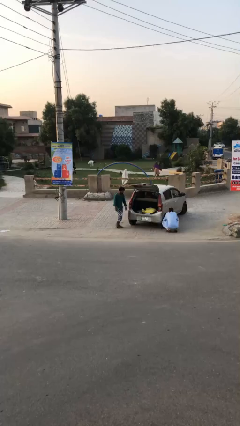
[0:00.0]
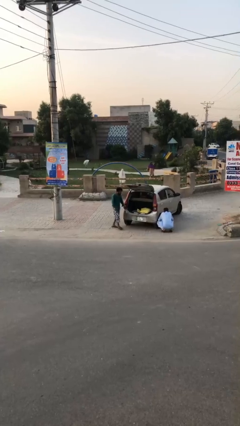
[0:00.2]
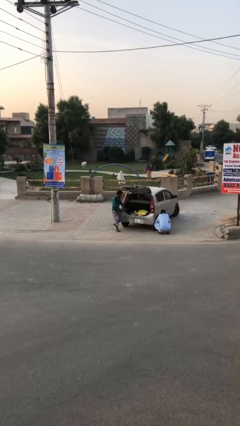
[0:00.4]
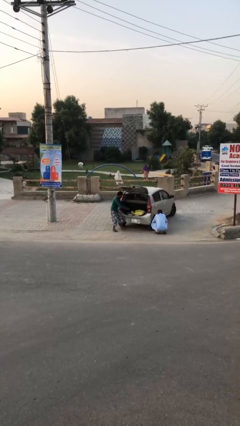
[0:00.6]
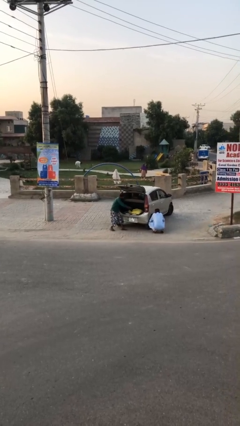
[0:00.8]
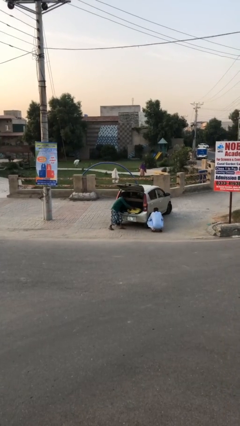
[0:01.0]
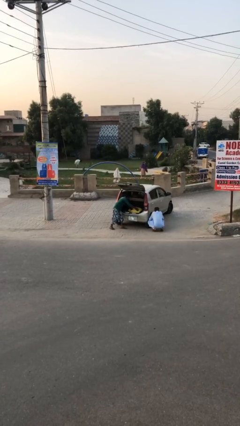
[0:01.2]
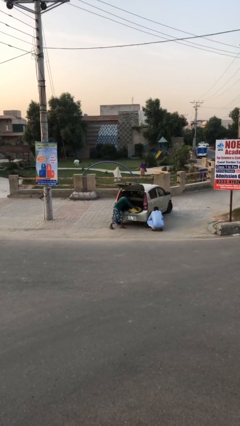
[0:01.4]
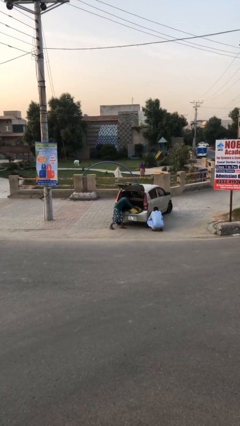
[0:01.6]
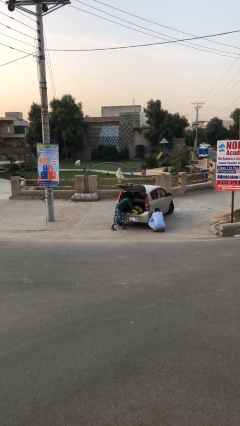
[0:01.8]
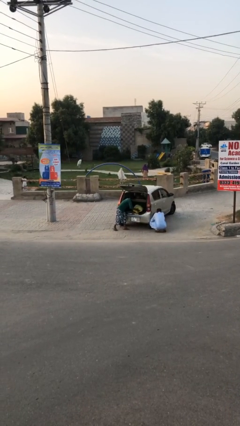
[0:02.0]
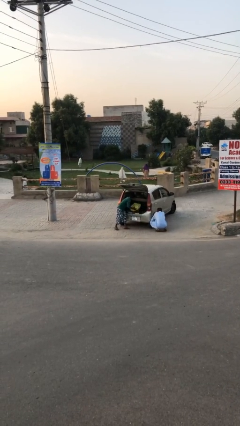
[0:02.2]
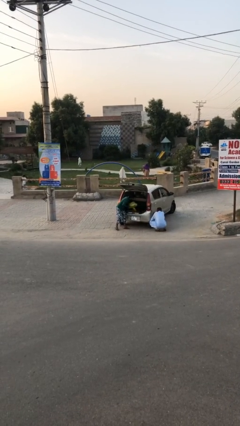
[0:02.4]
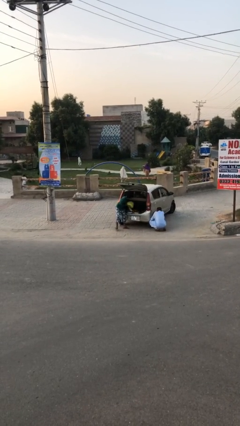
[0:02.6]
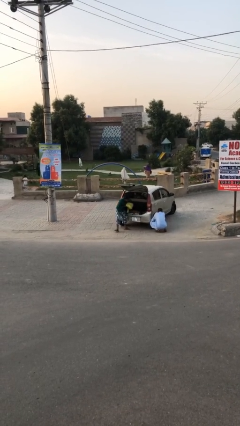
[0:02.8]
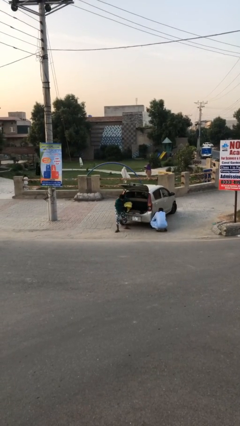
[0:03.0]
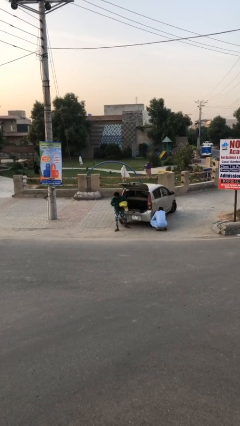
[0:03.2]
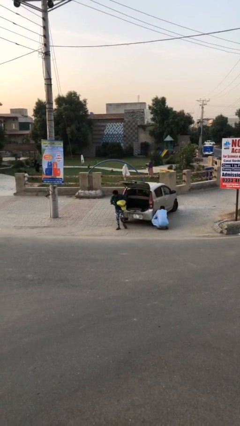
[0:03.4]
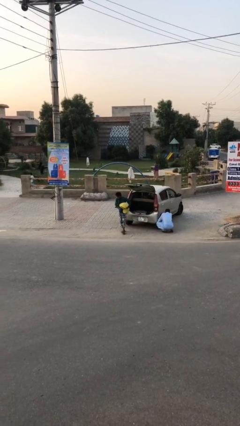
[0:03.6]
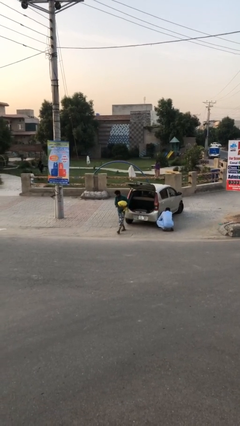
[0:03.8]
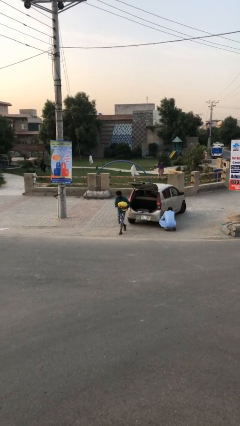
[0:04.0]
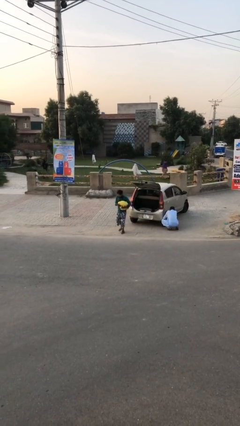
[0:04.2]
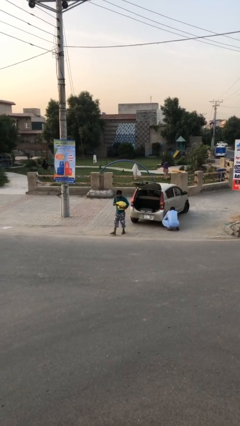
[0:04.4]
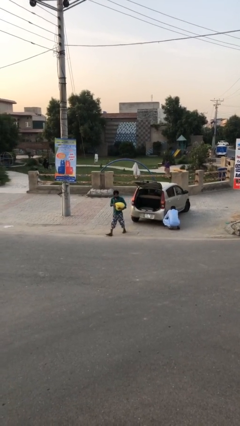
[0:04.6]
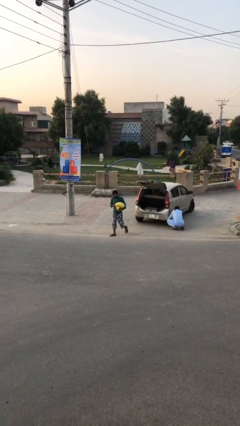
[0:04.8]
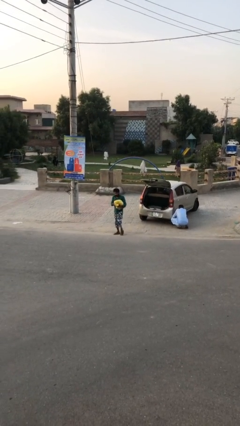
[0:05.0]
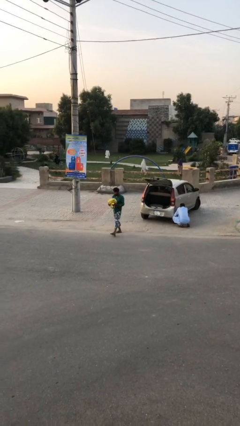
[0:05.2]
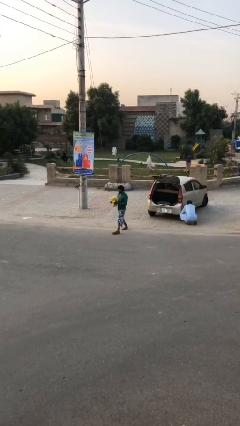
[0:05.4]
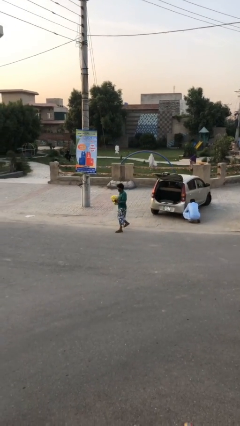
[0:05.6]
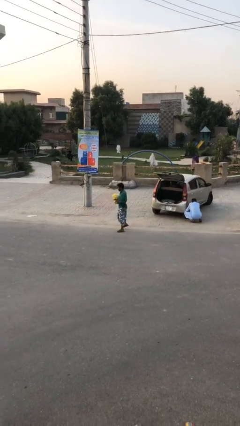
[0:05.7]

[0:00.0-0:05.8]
person steals object from person

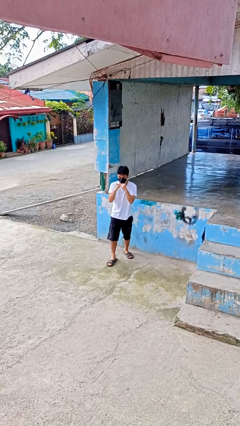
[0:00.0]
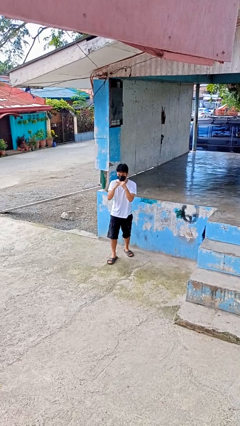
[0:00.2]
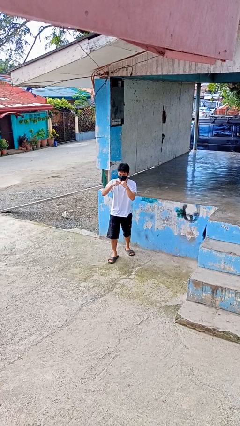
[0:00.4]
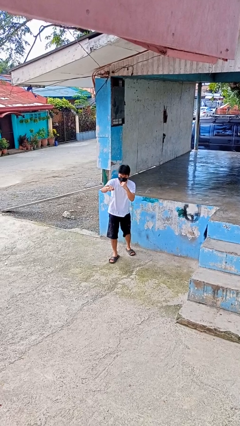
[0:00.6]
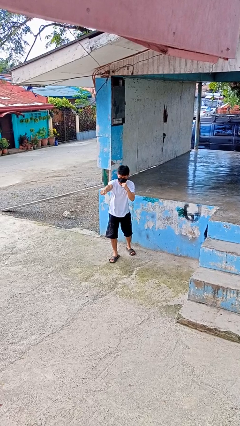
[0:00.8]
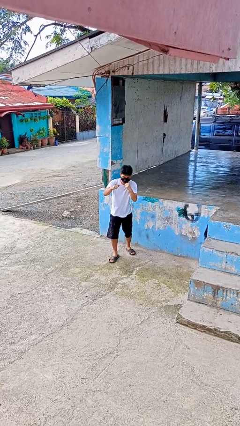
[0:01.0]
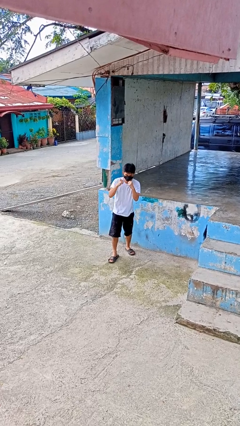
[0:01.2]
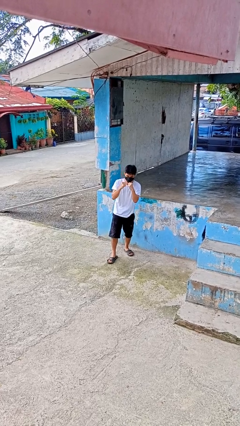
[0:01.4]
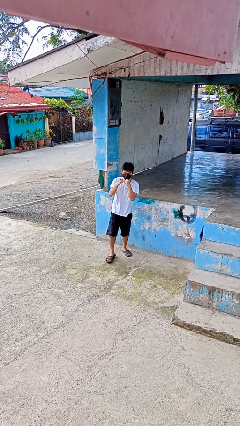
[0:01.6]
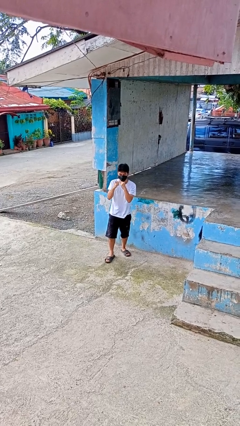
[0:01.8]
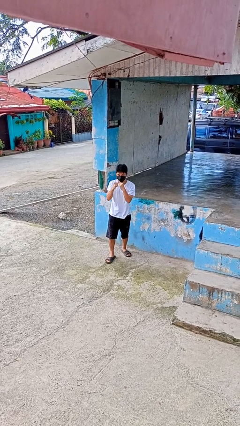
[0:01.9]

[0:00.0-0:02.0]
person punches

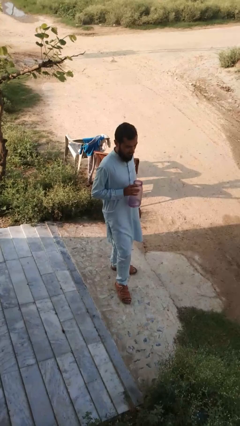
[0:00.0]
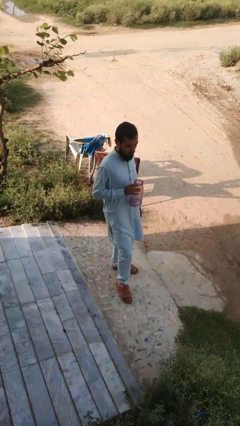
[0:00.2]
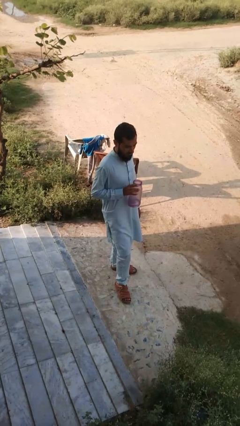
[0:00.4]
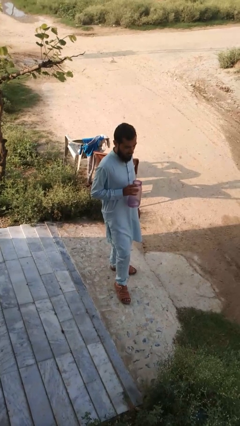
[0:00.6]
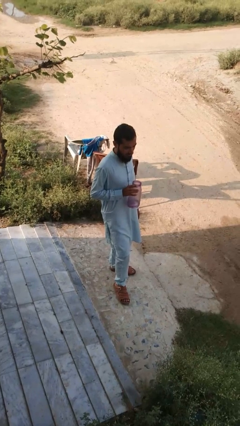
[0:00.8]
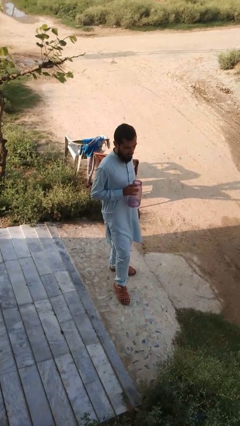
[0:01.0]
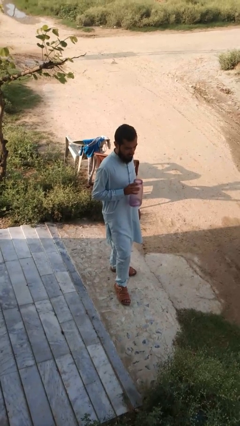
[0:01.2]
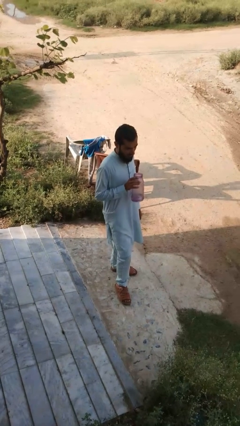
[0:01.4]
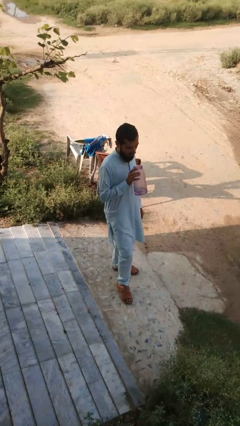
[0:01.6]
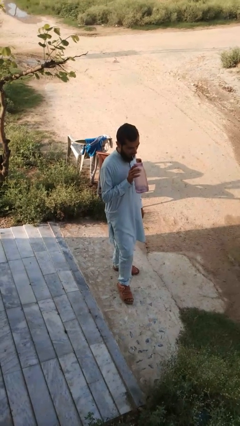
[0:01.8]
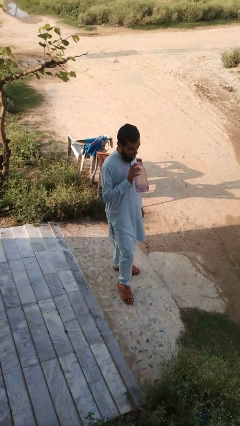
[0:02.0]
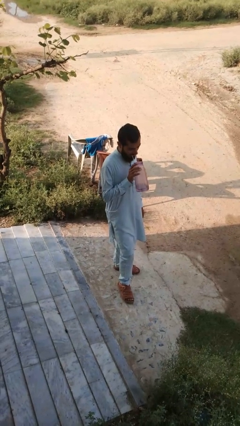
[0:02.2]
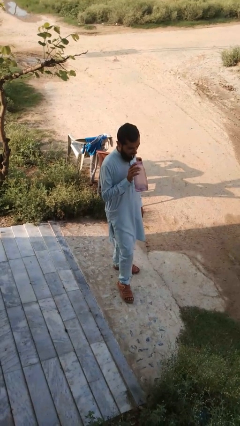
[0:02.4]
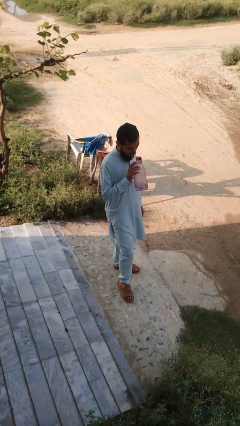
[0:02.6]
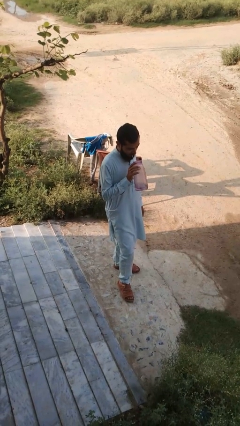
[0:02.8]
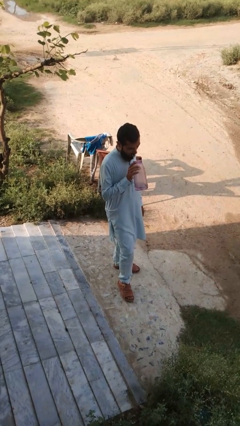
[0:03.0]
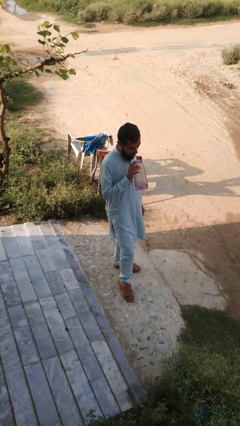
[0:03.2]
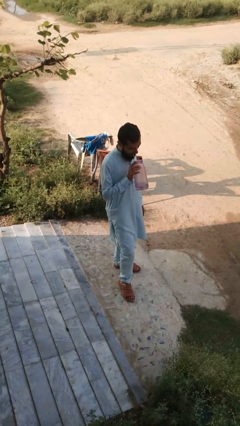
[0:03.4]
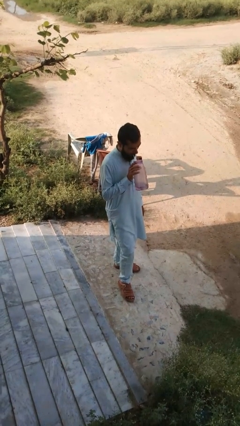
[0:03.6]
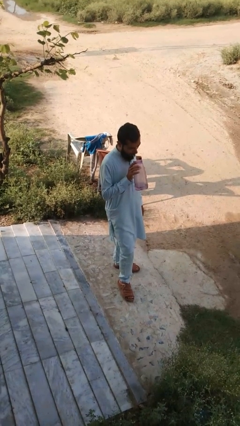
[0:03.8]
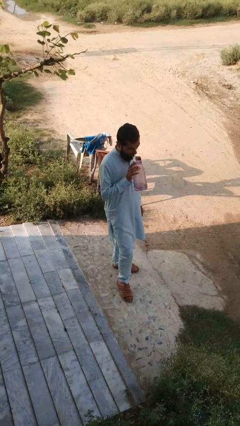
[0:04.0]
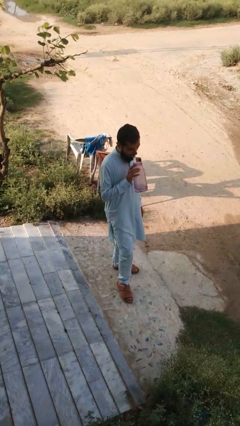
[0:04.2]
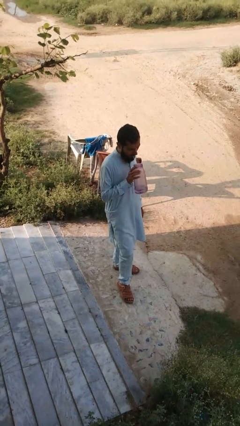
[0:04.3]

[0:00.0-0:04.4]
person drinks from straw

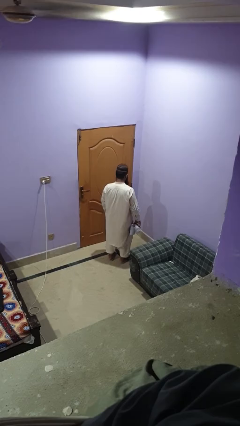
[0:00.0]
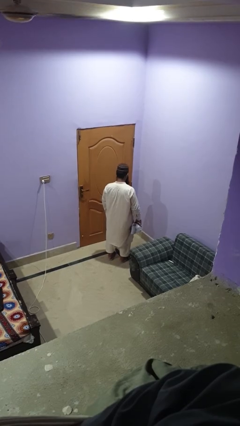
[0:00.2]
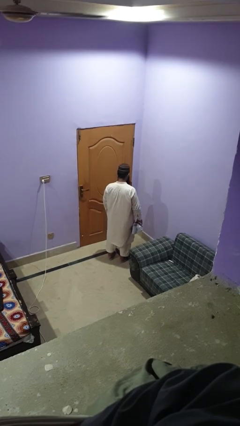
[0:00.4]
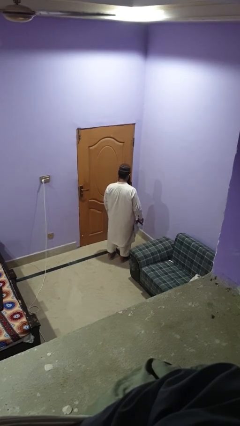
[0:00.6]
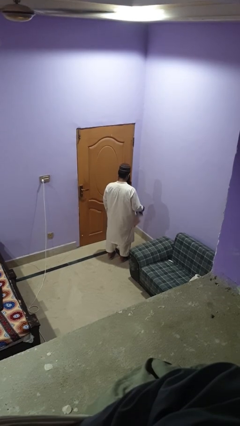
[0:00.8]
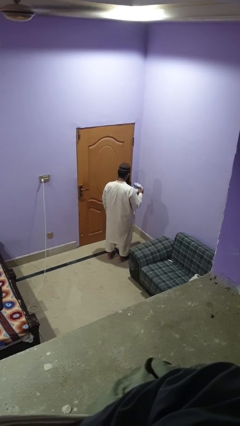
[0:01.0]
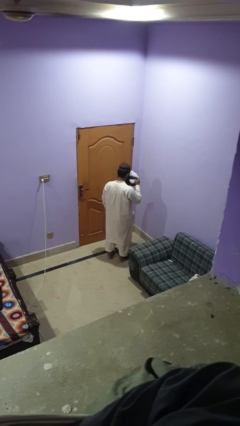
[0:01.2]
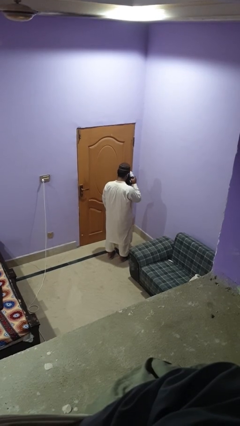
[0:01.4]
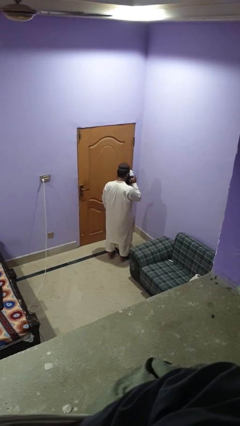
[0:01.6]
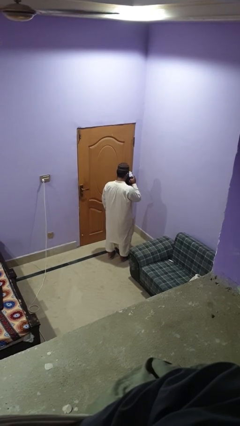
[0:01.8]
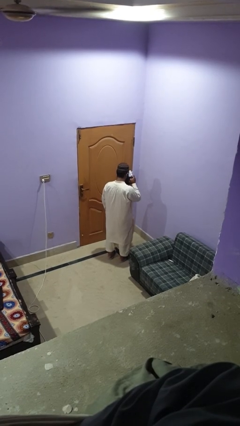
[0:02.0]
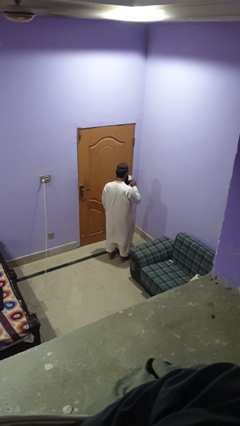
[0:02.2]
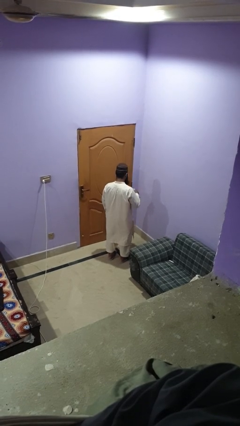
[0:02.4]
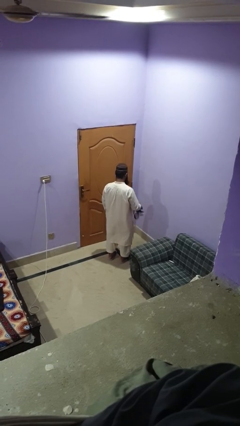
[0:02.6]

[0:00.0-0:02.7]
person blows nose

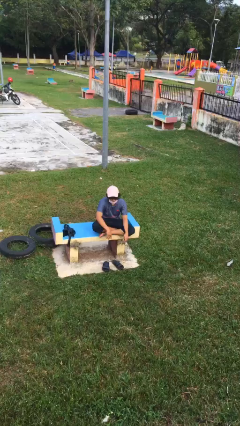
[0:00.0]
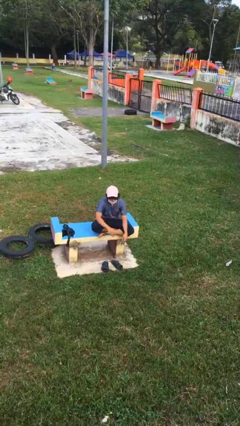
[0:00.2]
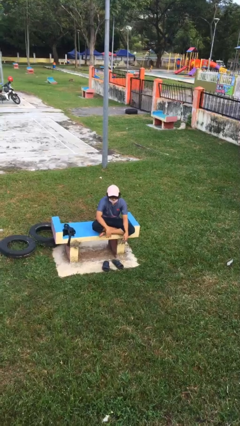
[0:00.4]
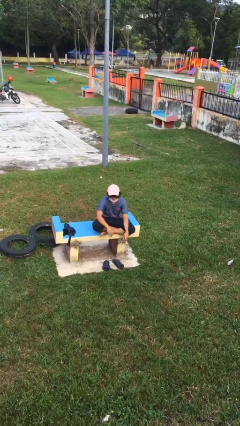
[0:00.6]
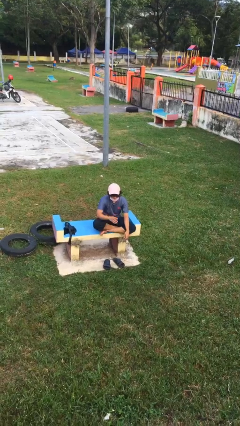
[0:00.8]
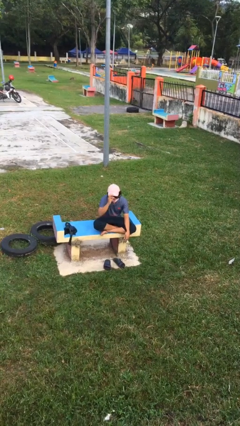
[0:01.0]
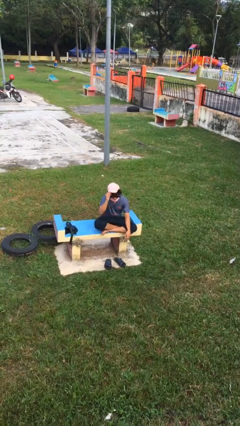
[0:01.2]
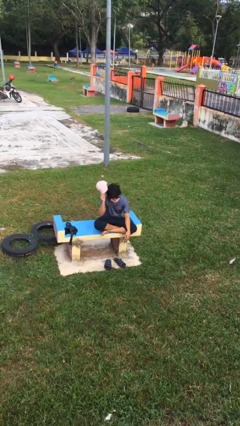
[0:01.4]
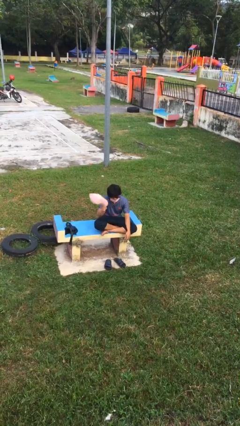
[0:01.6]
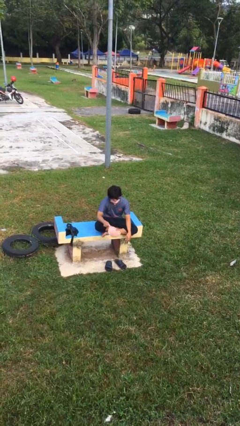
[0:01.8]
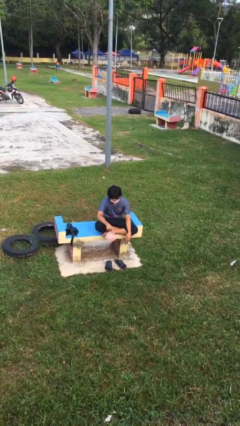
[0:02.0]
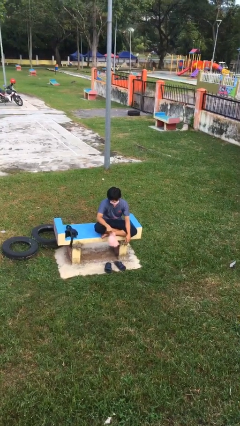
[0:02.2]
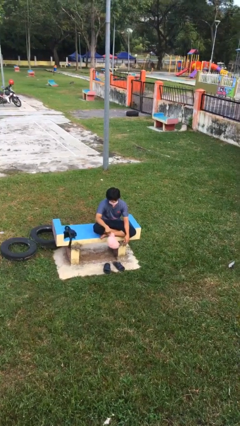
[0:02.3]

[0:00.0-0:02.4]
person takes off hat

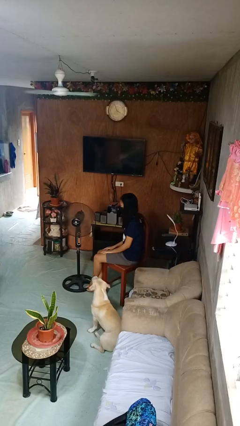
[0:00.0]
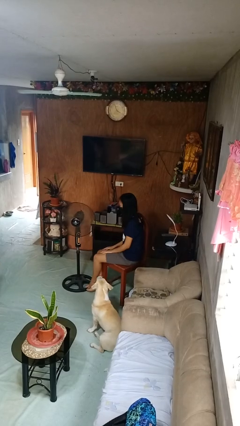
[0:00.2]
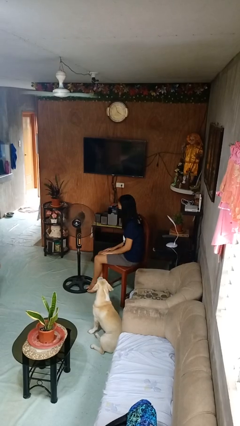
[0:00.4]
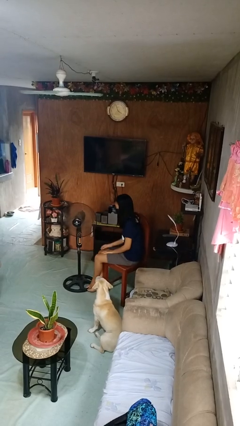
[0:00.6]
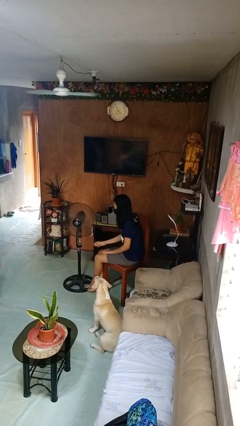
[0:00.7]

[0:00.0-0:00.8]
person turns on fan
